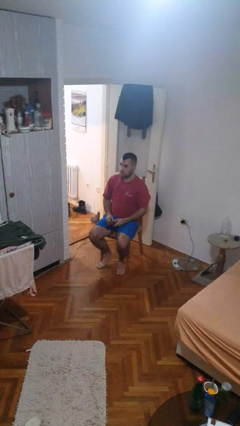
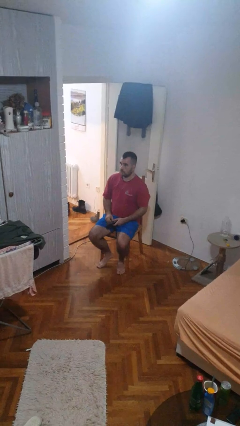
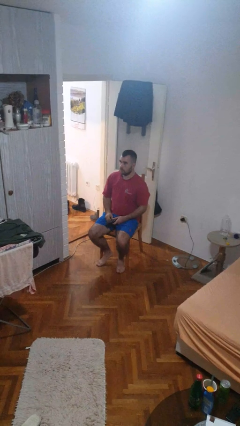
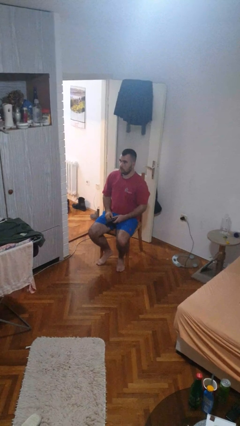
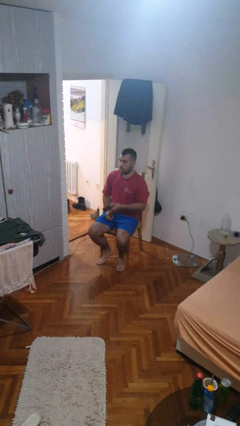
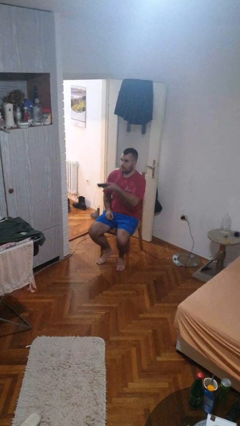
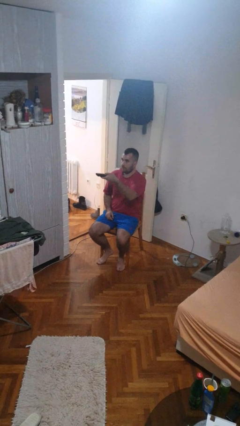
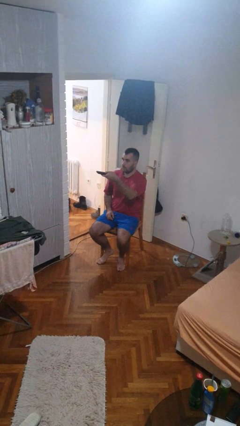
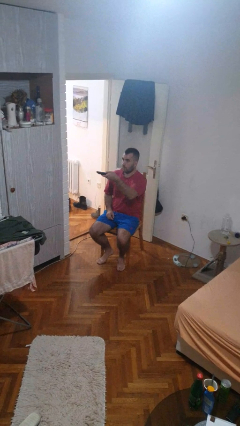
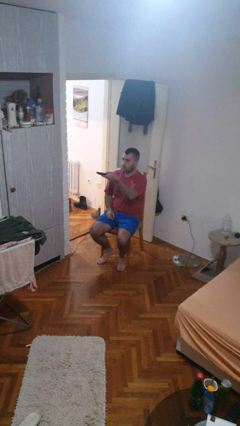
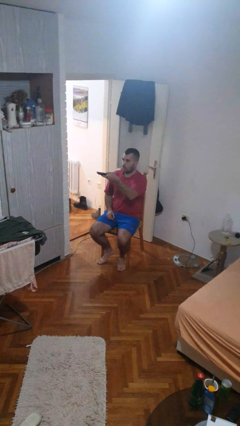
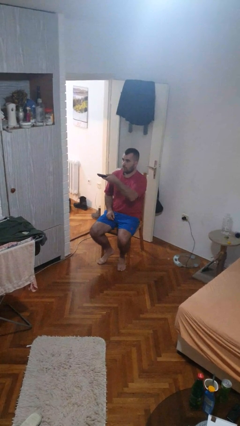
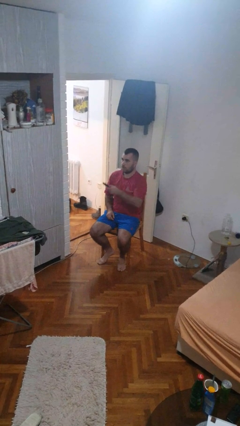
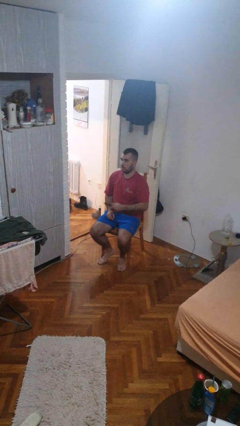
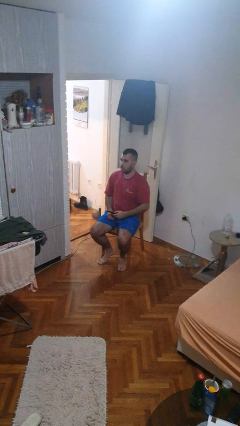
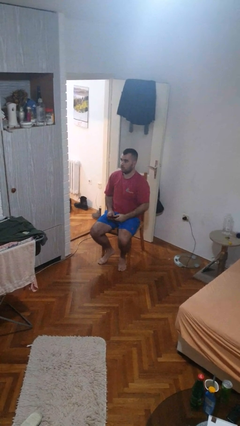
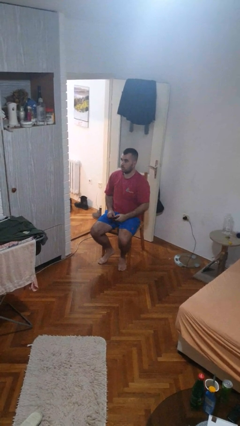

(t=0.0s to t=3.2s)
person uses television remote

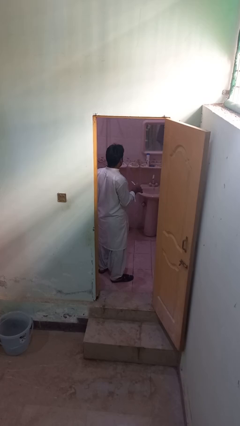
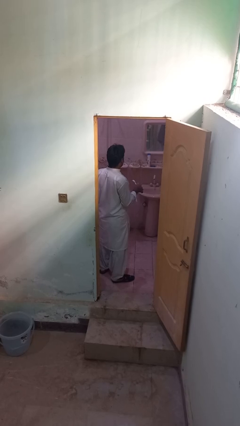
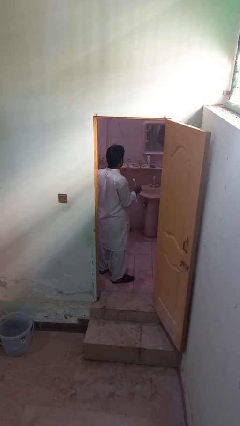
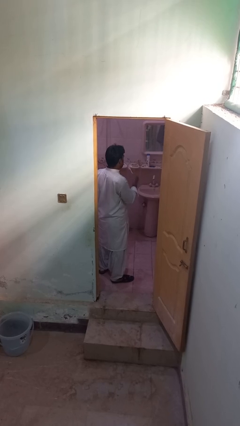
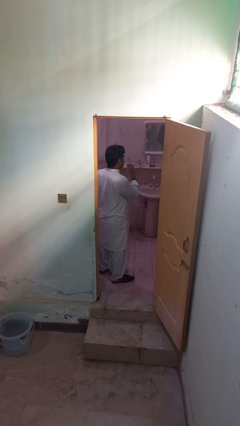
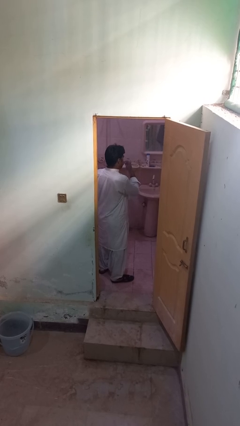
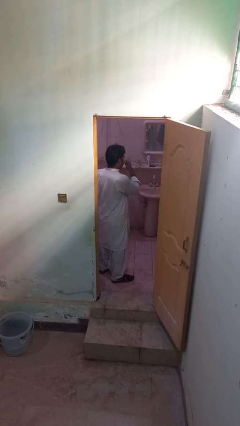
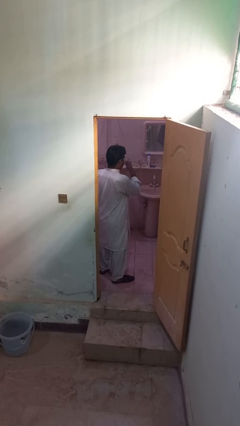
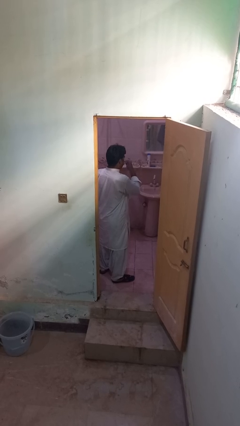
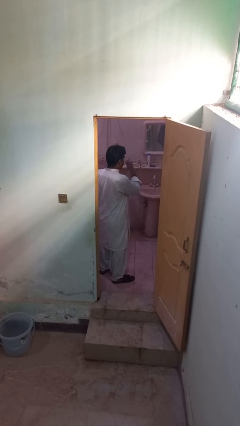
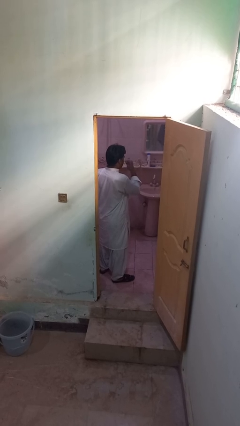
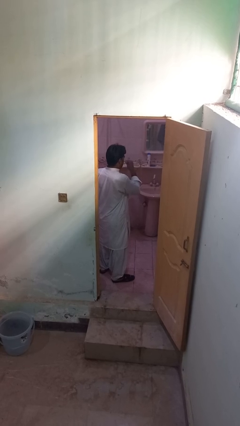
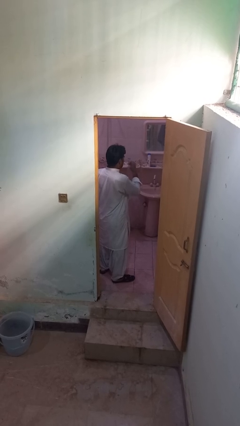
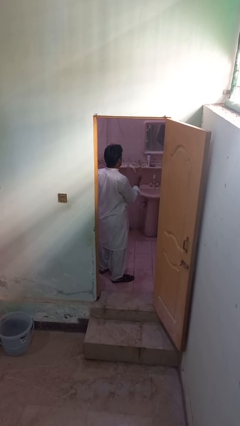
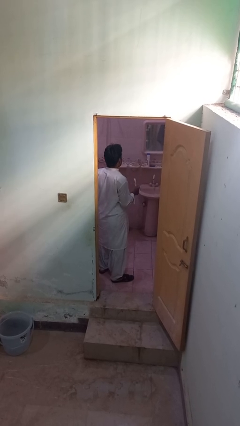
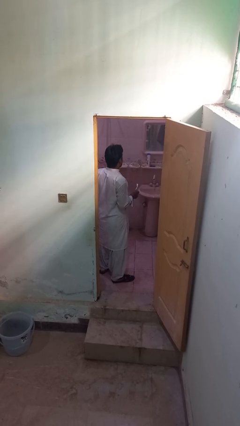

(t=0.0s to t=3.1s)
person brushes teeth

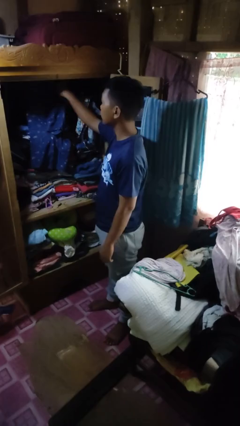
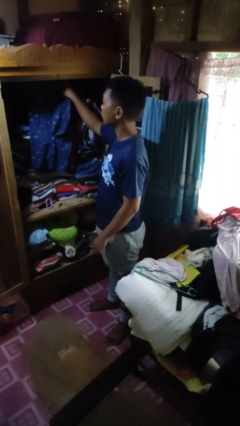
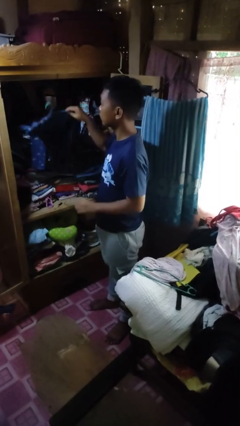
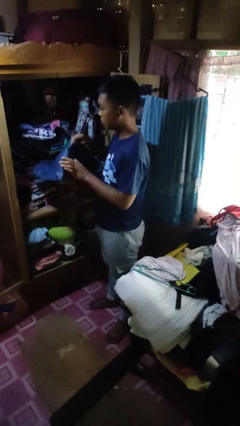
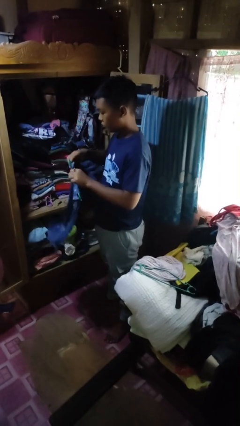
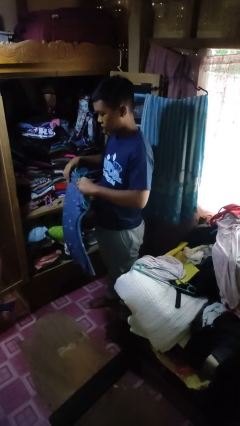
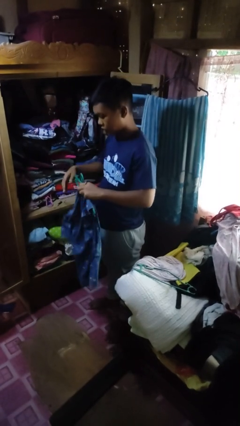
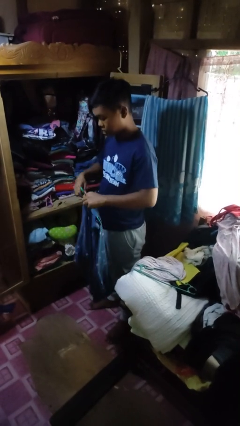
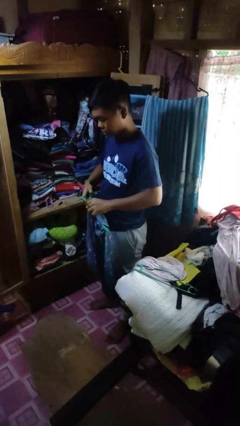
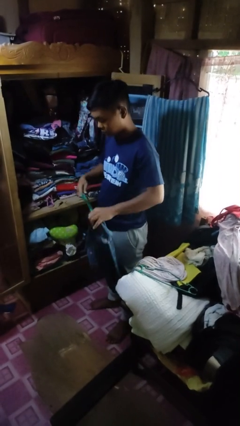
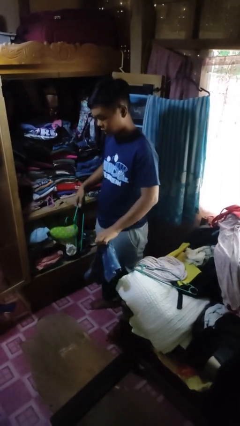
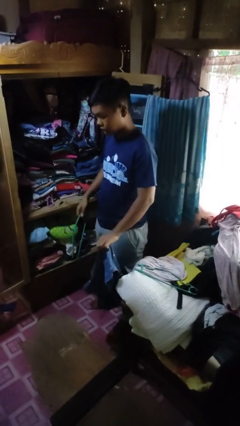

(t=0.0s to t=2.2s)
person takes clothes from closet

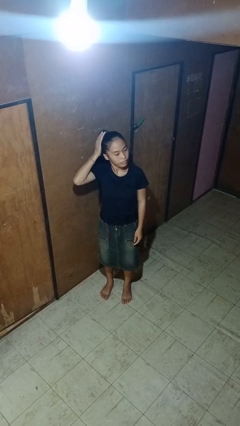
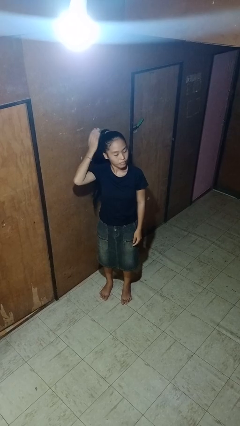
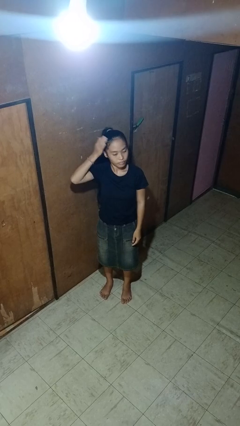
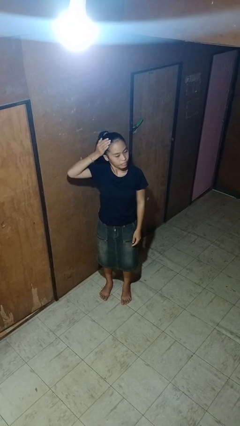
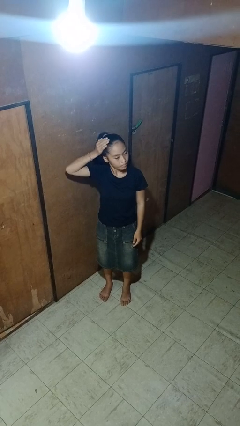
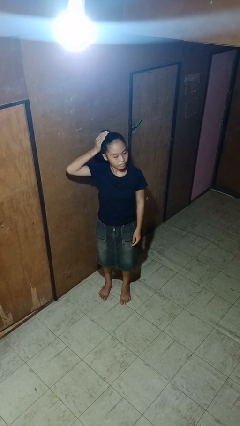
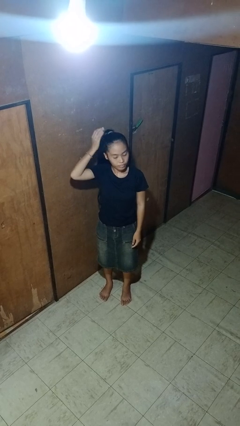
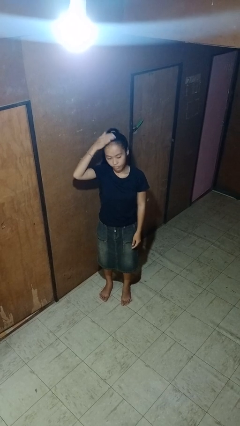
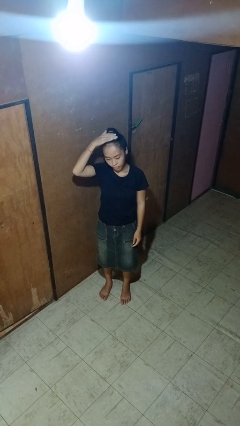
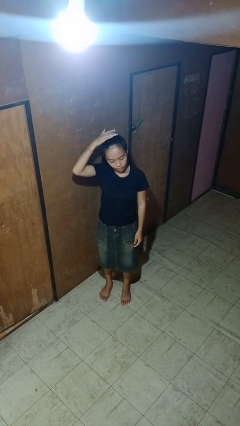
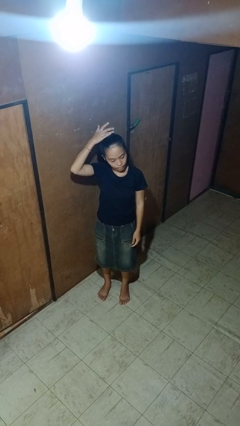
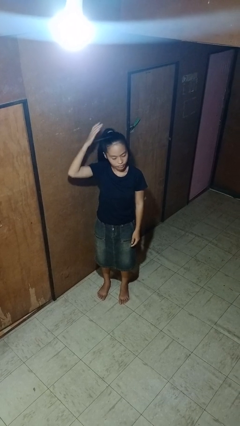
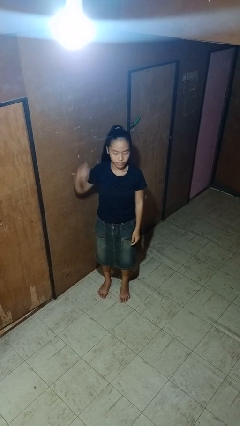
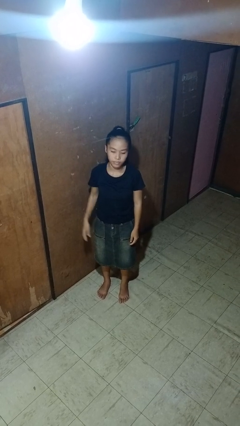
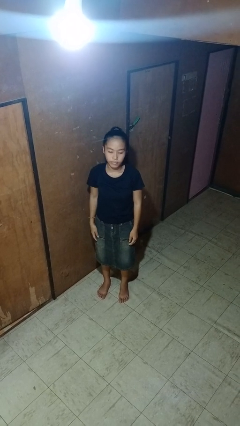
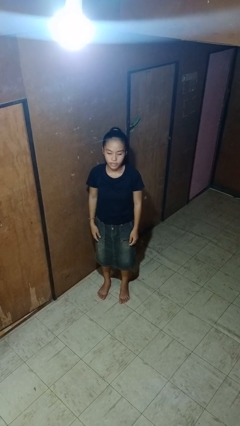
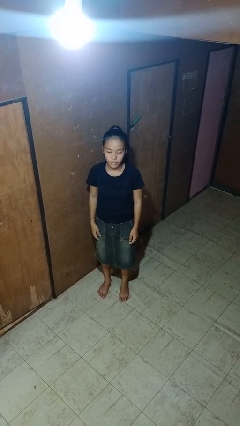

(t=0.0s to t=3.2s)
person strokes hair

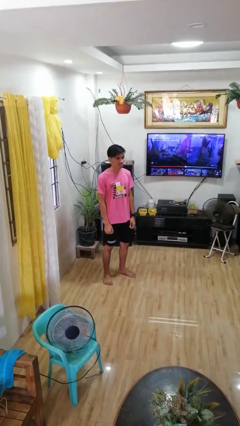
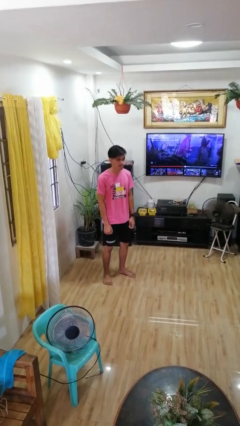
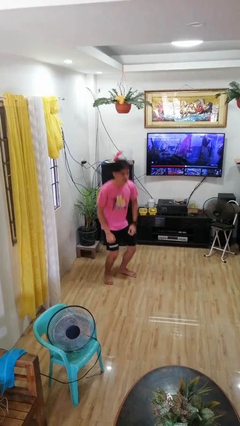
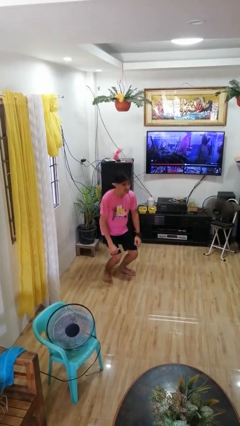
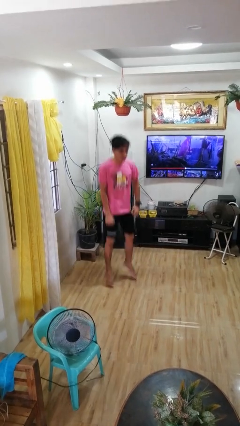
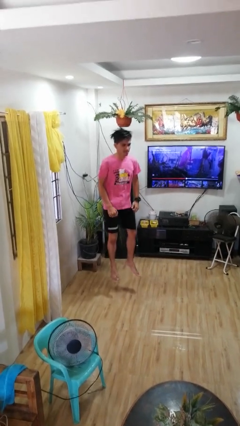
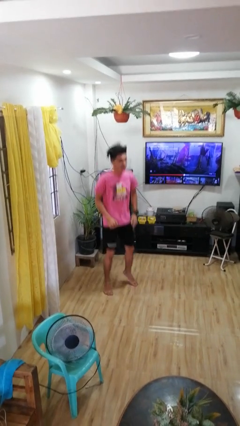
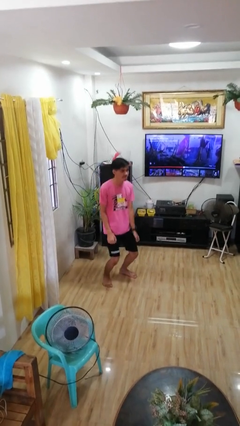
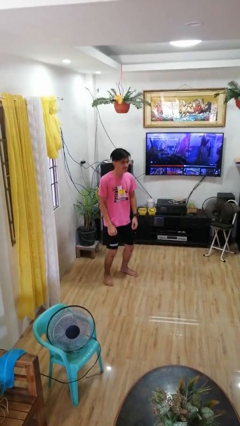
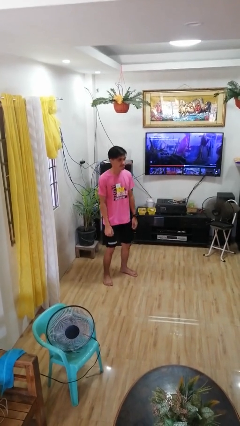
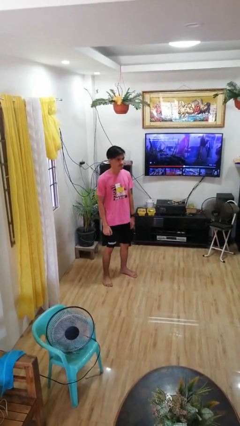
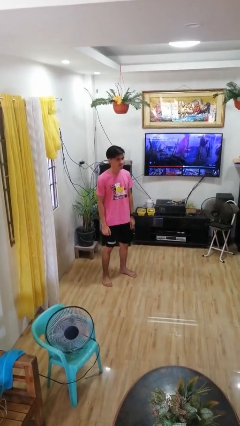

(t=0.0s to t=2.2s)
person jumps

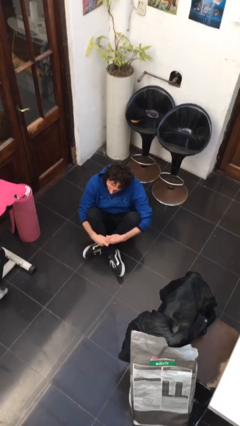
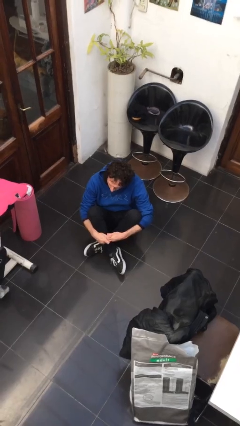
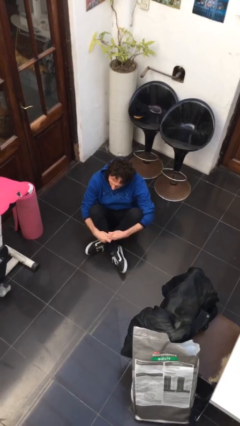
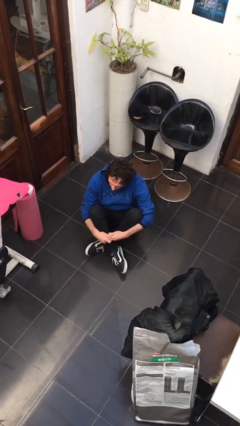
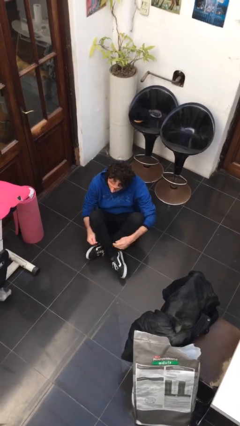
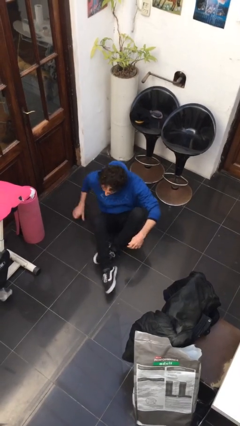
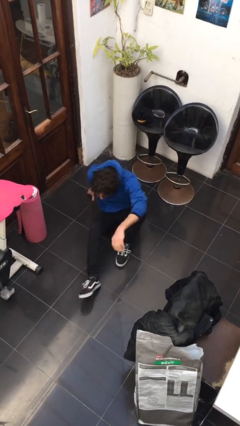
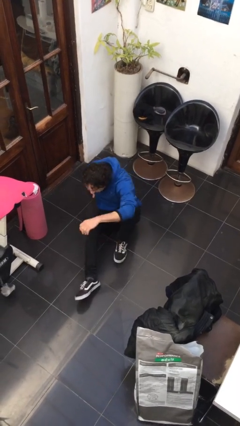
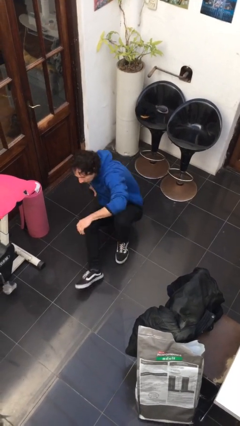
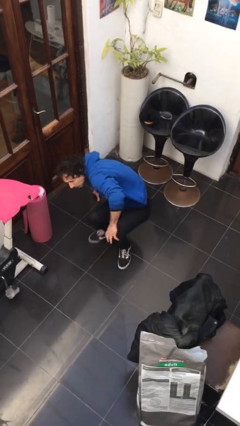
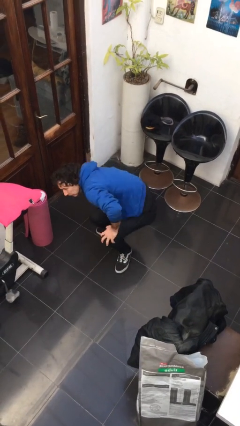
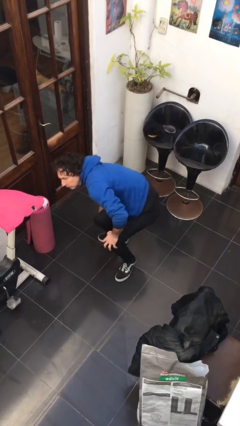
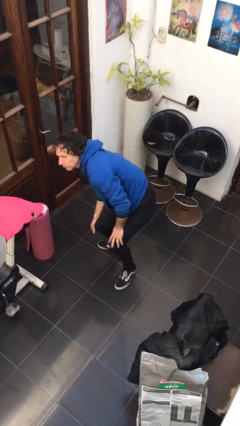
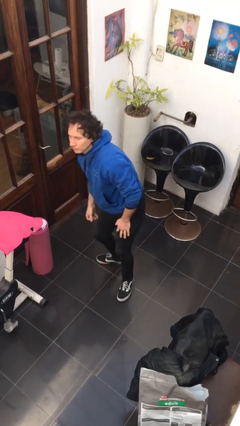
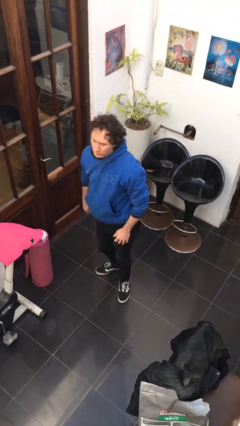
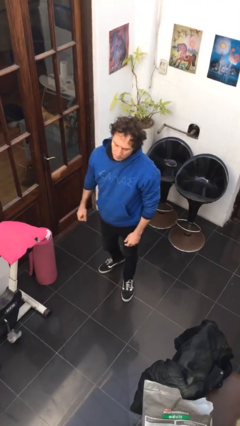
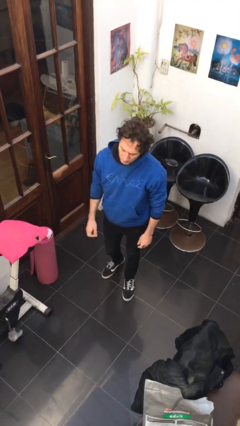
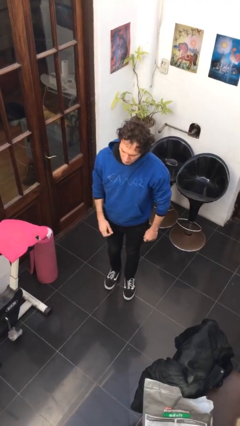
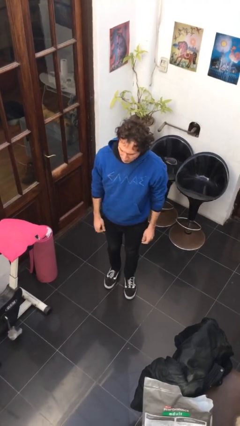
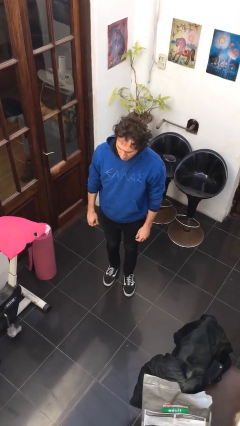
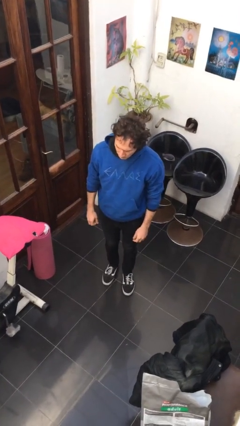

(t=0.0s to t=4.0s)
person stands up from floor
